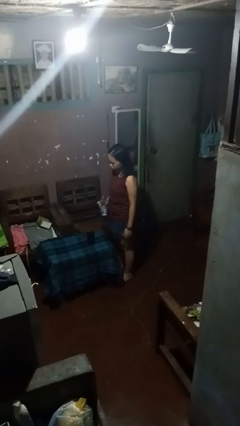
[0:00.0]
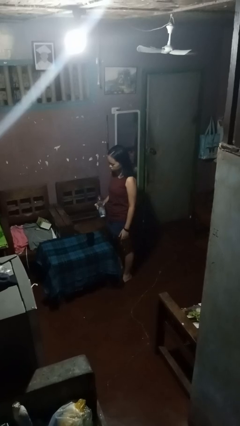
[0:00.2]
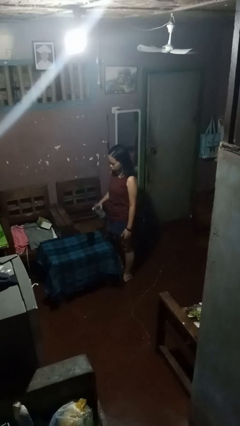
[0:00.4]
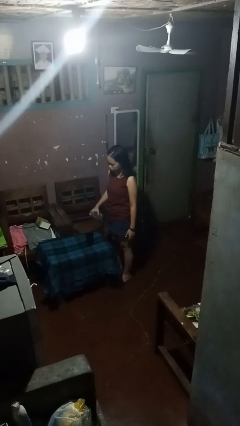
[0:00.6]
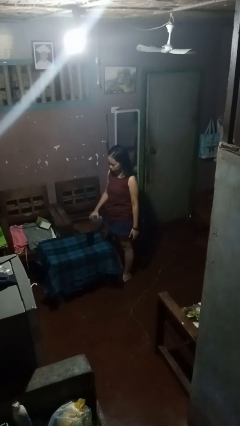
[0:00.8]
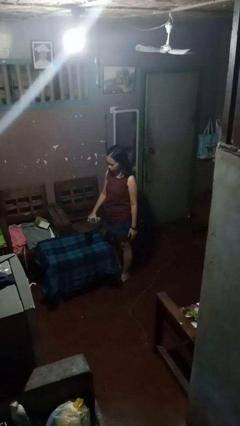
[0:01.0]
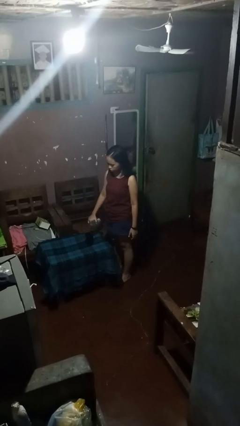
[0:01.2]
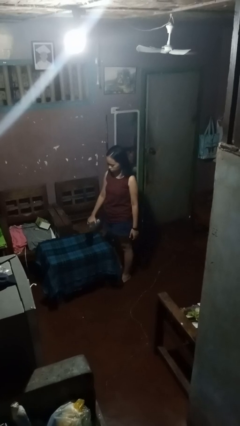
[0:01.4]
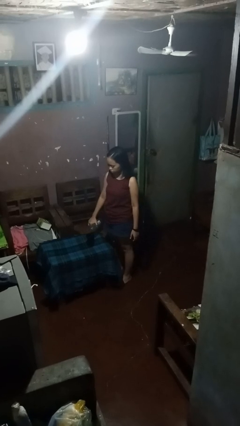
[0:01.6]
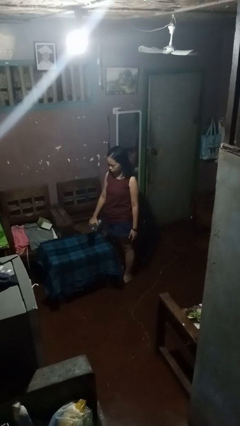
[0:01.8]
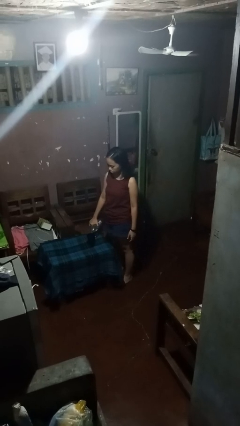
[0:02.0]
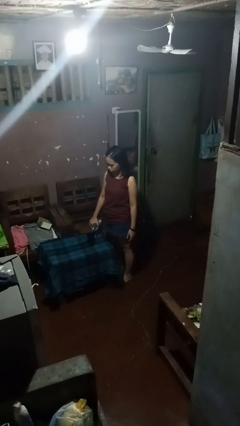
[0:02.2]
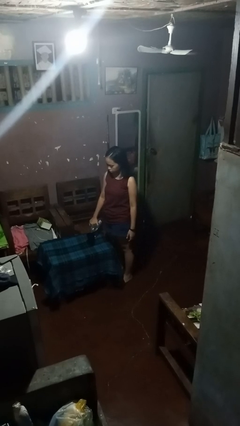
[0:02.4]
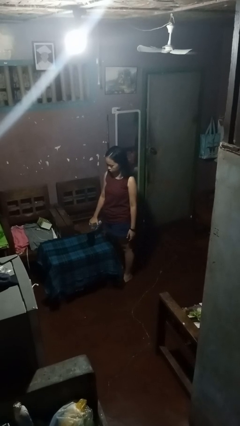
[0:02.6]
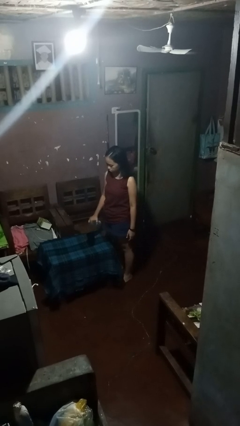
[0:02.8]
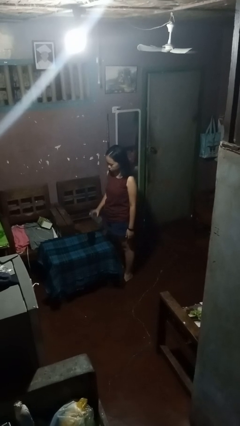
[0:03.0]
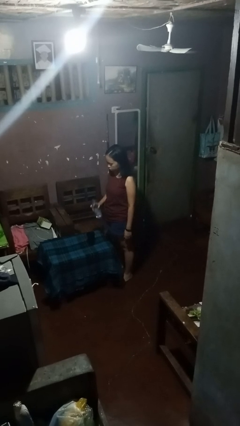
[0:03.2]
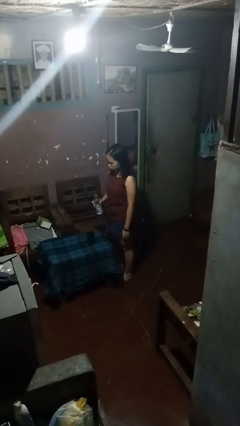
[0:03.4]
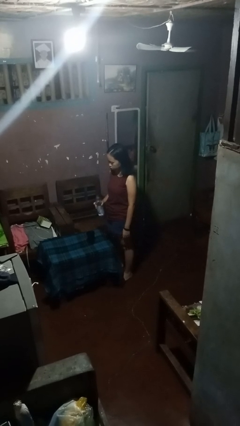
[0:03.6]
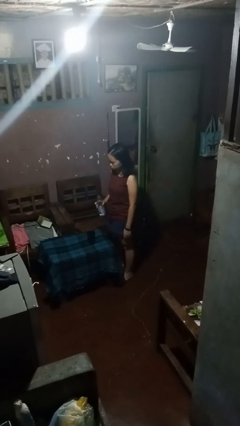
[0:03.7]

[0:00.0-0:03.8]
person pours liquid into cup

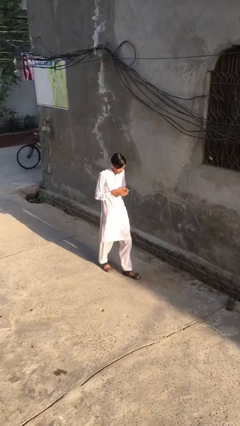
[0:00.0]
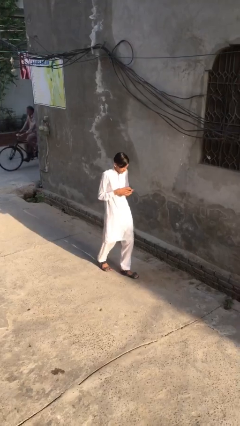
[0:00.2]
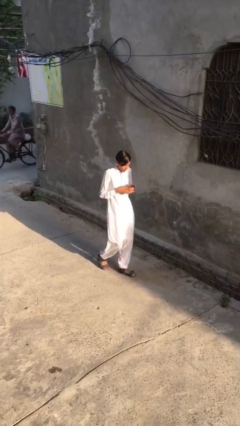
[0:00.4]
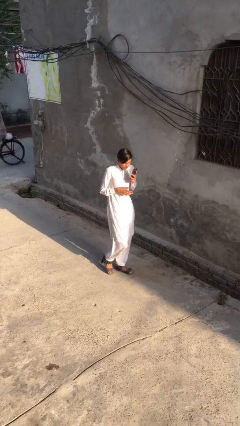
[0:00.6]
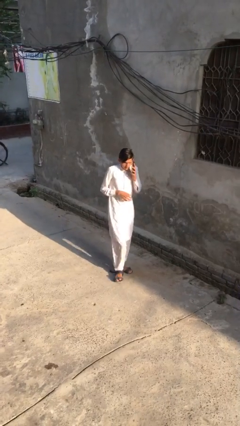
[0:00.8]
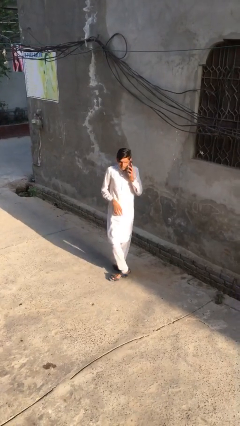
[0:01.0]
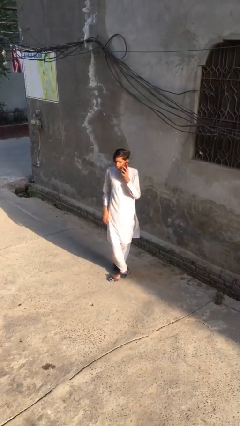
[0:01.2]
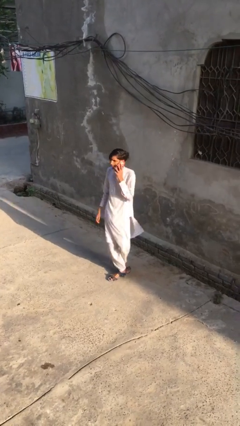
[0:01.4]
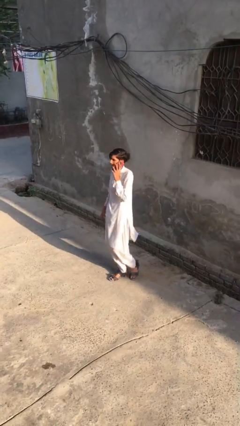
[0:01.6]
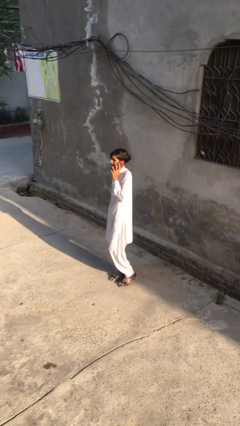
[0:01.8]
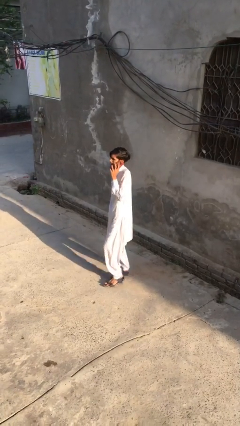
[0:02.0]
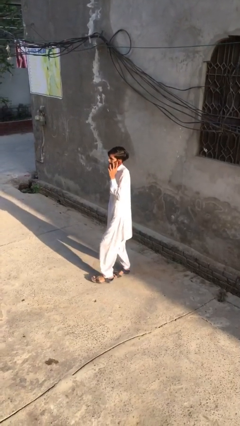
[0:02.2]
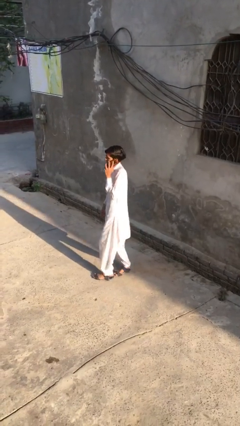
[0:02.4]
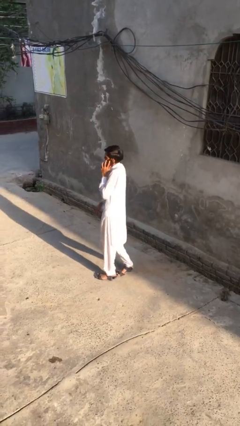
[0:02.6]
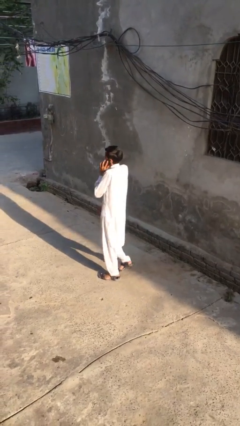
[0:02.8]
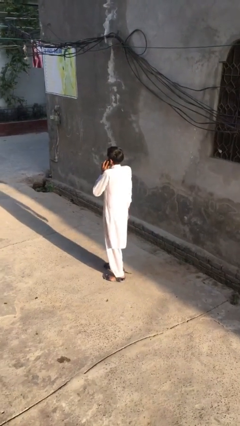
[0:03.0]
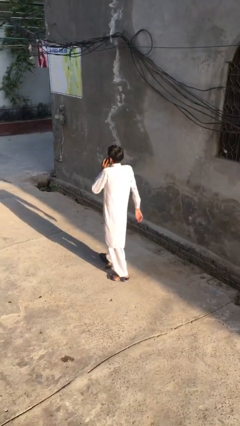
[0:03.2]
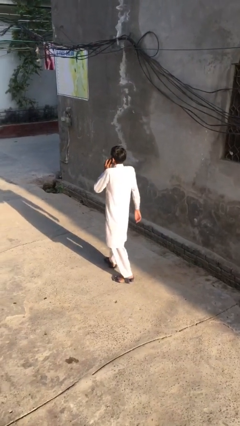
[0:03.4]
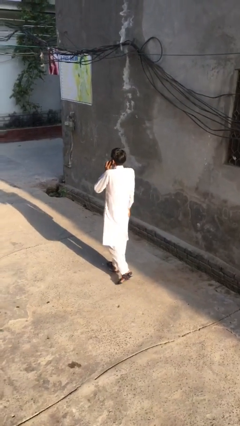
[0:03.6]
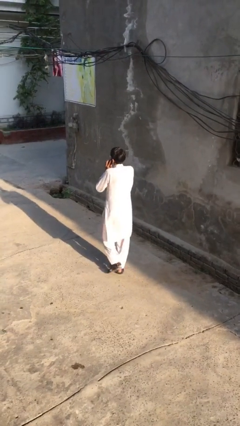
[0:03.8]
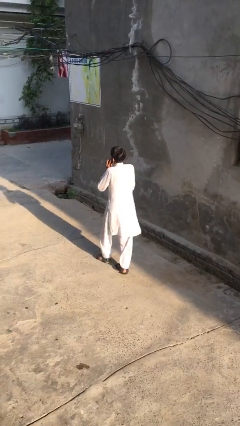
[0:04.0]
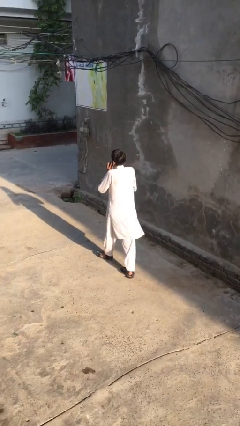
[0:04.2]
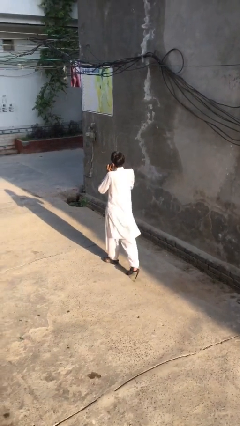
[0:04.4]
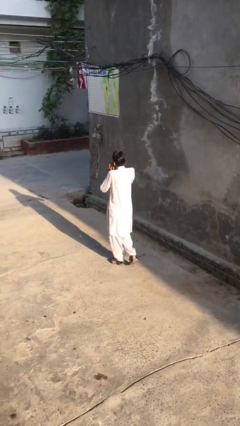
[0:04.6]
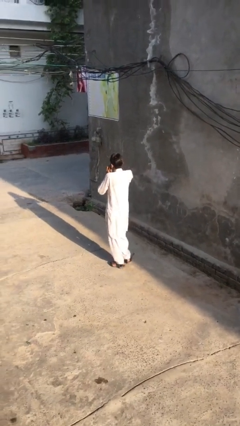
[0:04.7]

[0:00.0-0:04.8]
person talks on phone

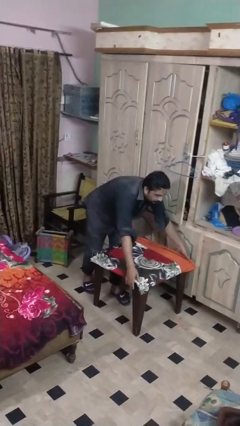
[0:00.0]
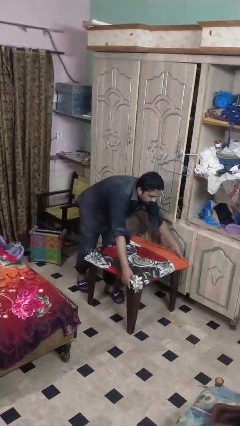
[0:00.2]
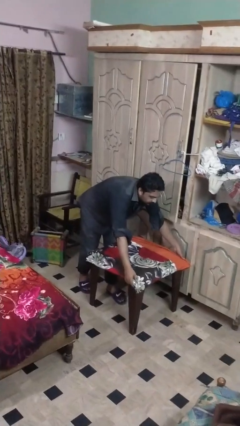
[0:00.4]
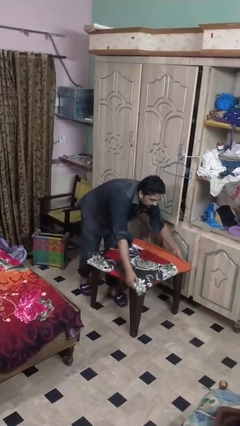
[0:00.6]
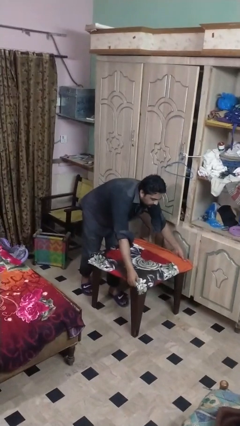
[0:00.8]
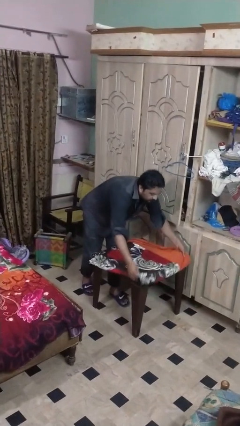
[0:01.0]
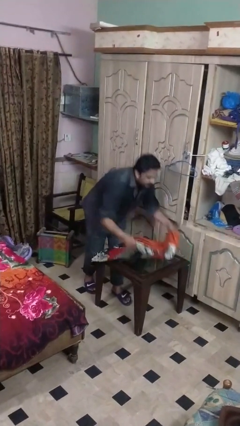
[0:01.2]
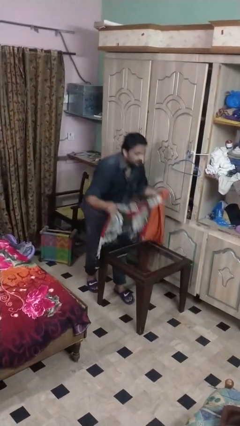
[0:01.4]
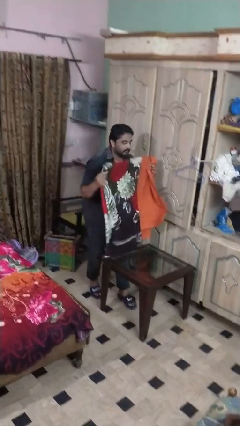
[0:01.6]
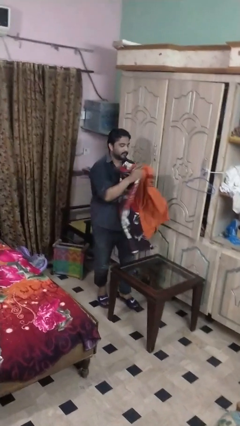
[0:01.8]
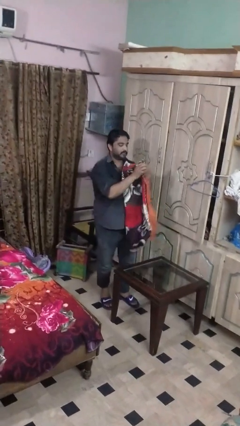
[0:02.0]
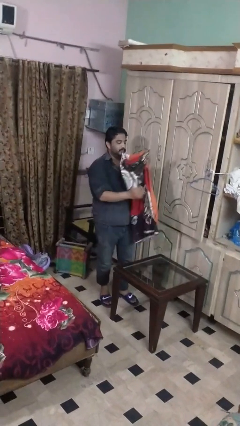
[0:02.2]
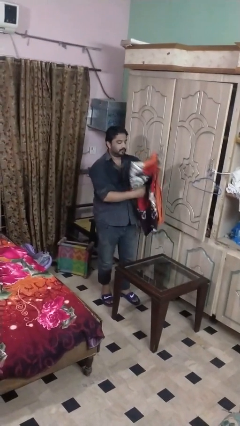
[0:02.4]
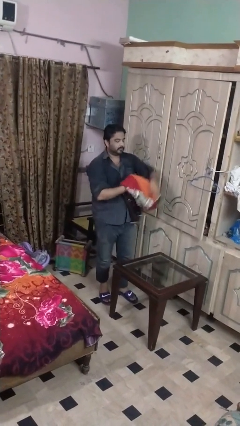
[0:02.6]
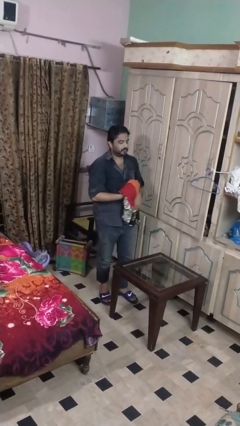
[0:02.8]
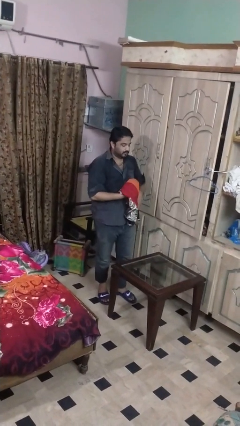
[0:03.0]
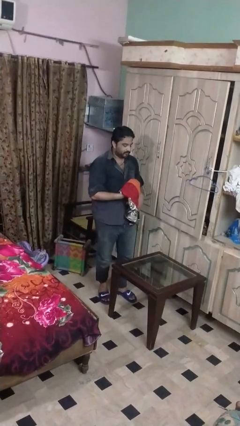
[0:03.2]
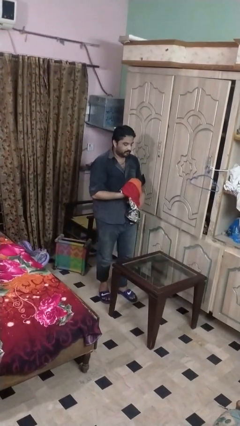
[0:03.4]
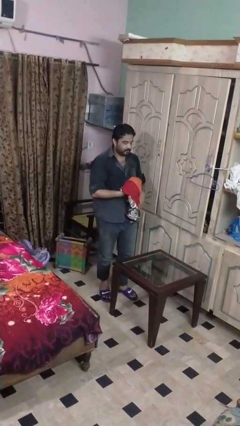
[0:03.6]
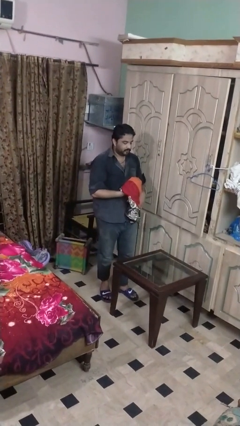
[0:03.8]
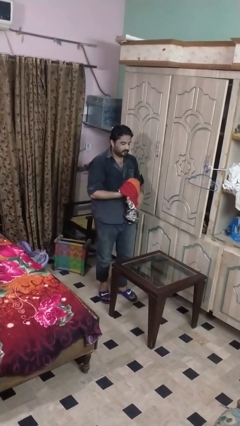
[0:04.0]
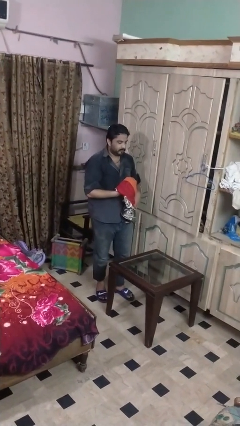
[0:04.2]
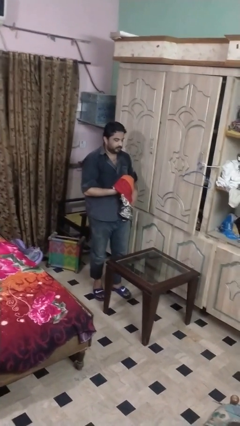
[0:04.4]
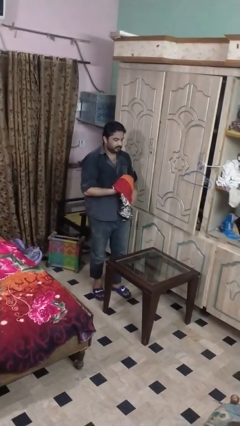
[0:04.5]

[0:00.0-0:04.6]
person folds tablecloth

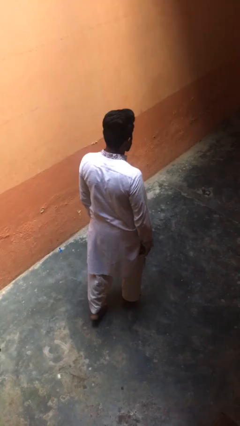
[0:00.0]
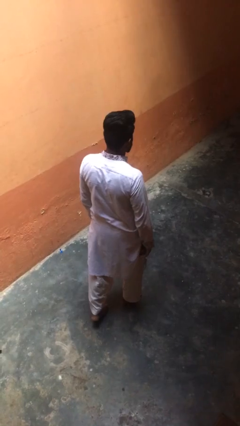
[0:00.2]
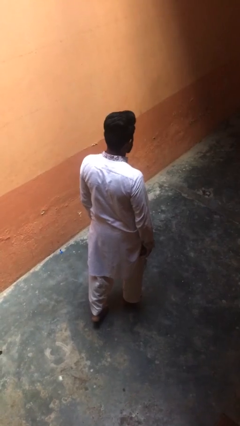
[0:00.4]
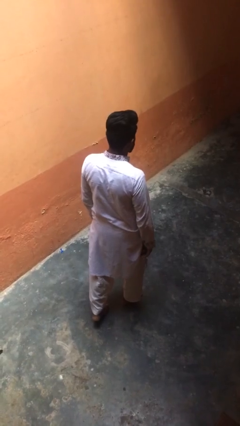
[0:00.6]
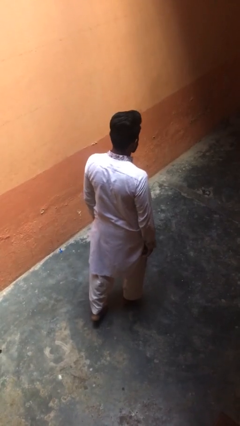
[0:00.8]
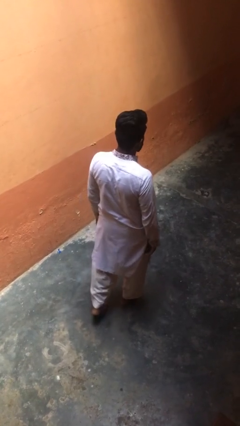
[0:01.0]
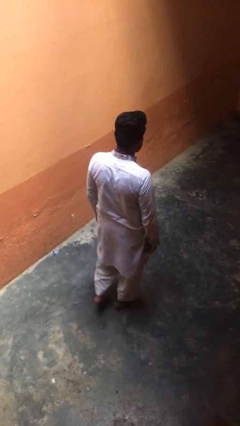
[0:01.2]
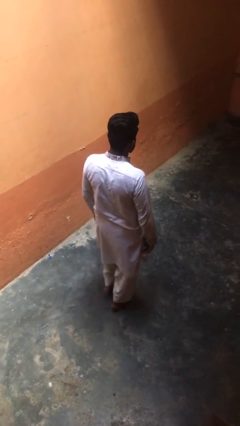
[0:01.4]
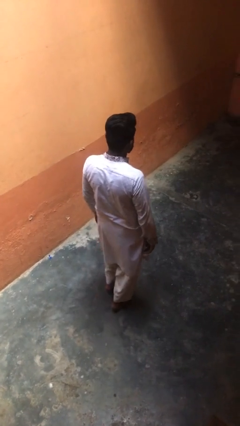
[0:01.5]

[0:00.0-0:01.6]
person walks tiptoe

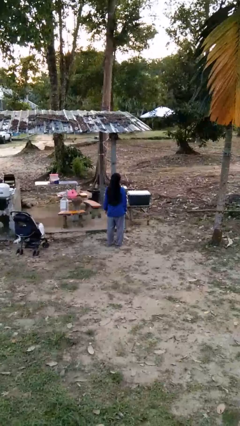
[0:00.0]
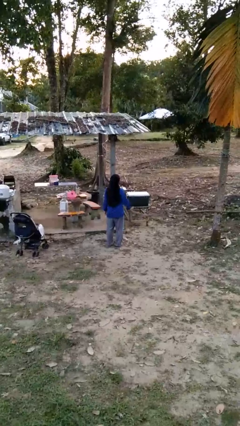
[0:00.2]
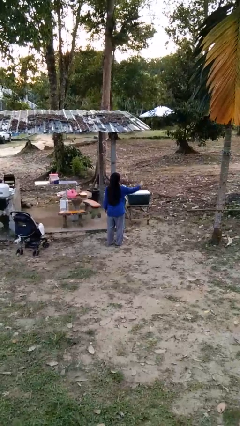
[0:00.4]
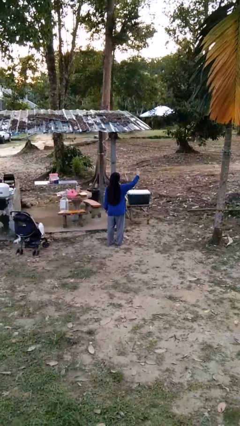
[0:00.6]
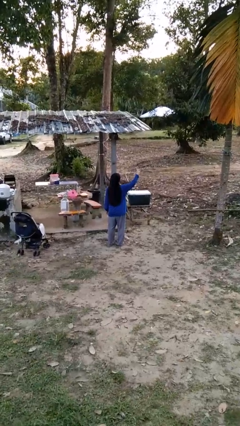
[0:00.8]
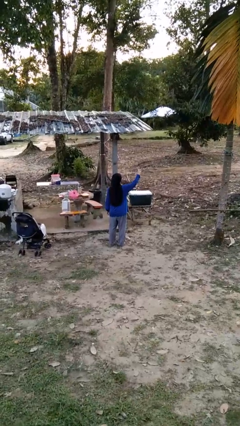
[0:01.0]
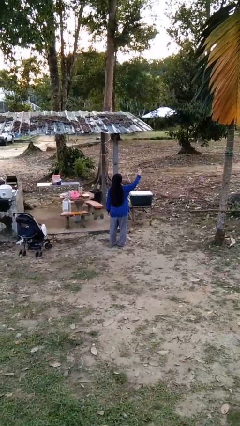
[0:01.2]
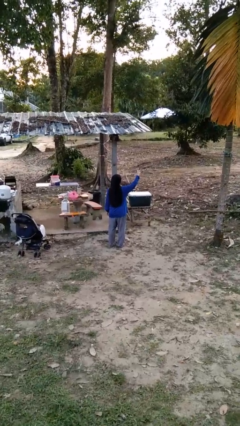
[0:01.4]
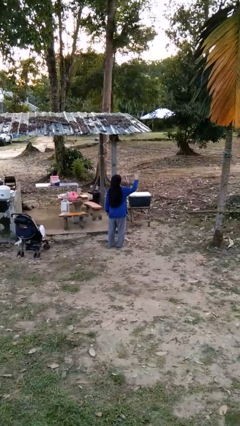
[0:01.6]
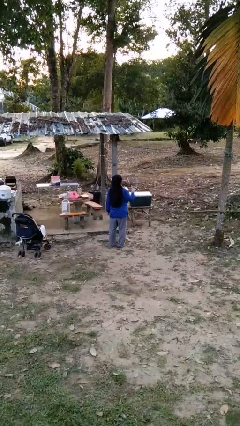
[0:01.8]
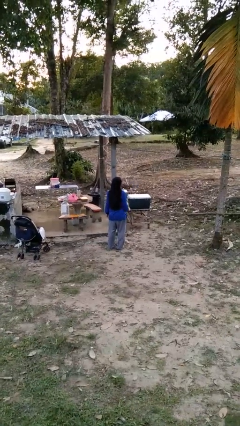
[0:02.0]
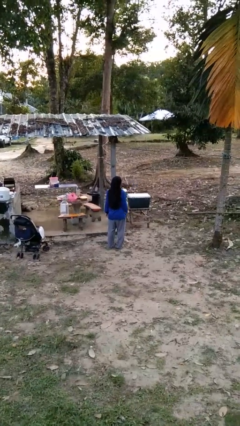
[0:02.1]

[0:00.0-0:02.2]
person gestures number three

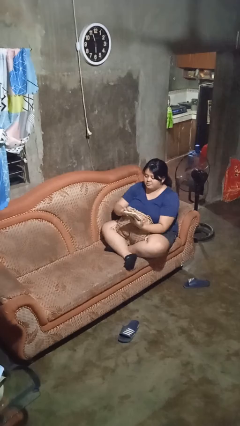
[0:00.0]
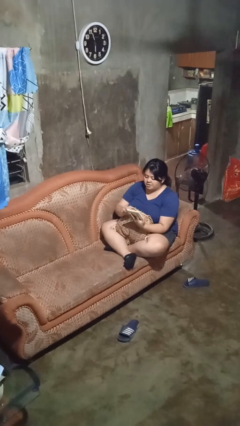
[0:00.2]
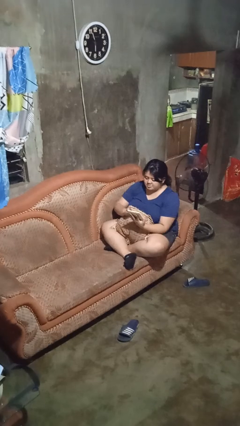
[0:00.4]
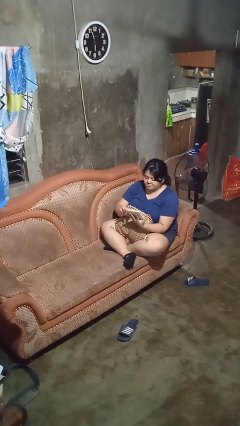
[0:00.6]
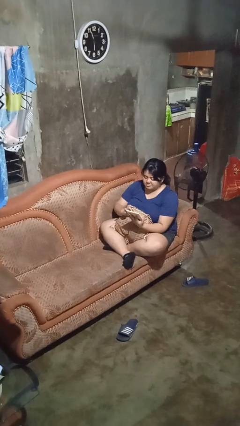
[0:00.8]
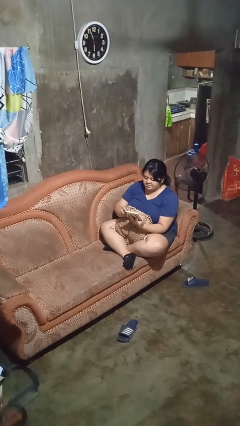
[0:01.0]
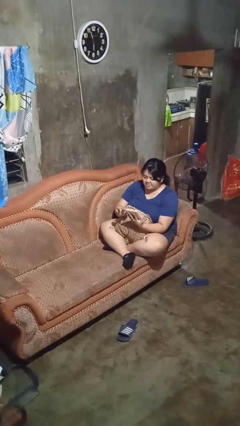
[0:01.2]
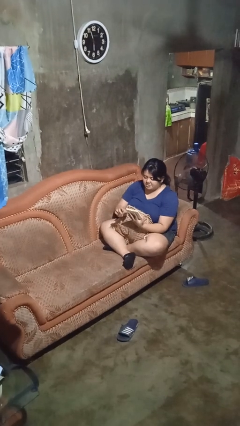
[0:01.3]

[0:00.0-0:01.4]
person interacts with tablet
